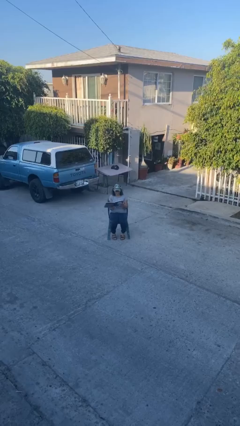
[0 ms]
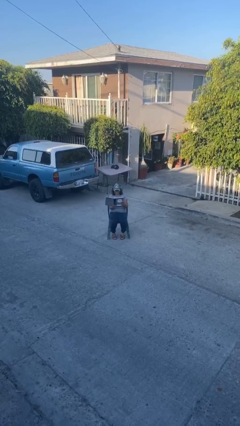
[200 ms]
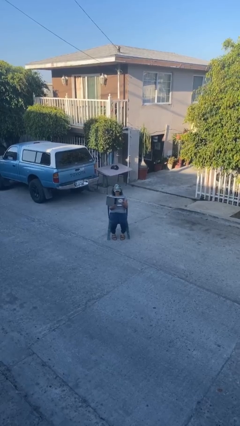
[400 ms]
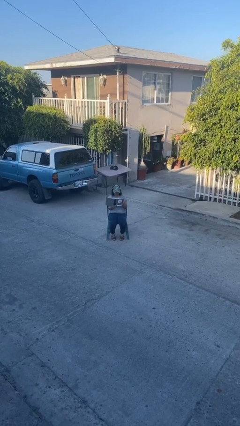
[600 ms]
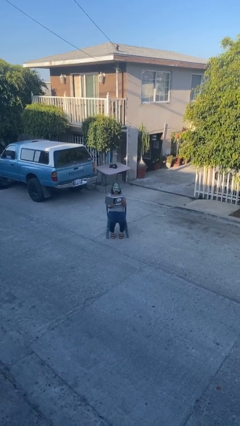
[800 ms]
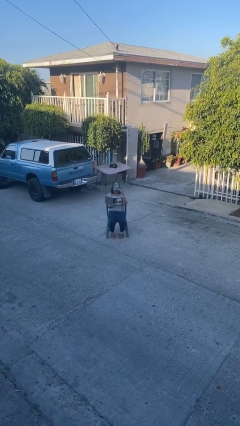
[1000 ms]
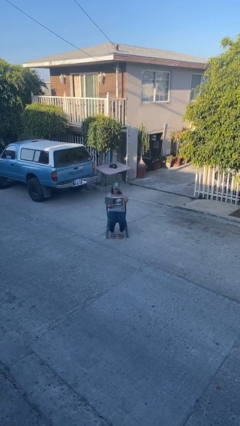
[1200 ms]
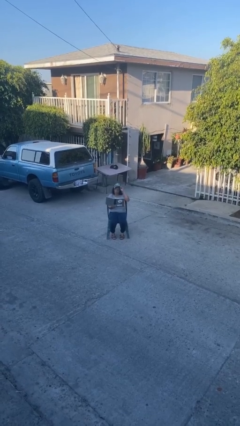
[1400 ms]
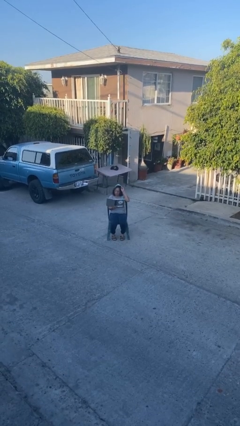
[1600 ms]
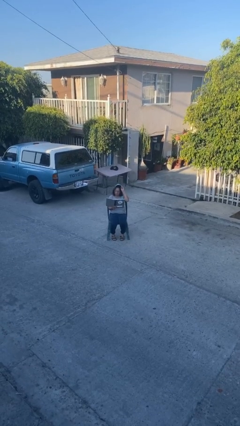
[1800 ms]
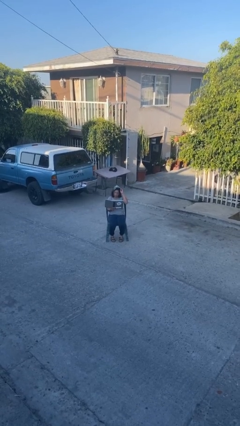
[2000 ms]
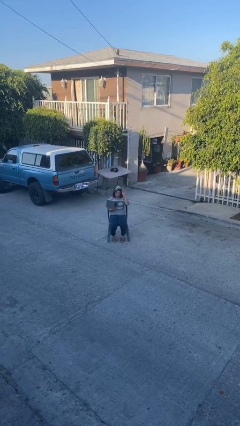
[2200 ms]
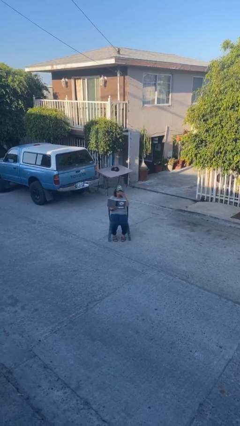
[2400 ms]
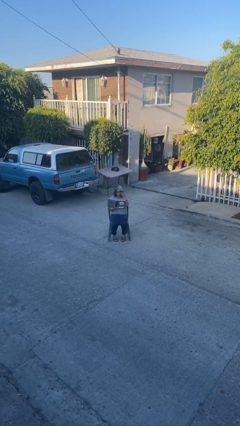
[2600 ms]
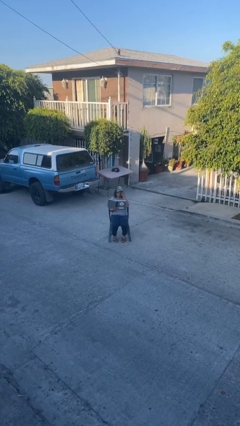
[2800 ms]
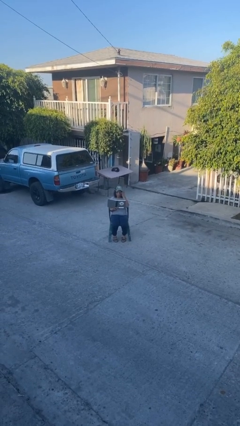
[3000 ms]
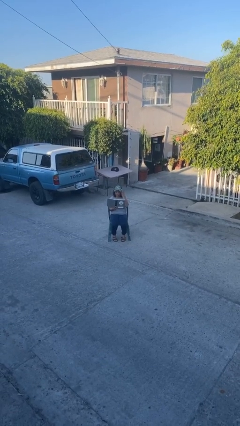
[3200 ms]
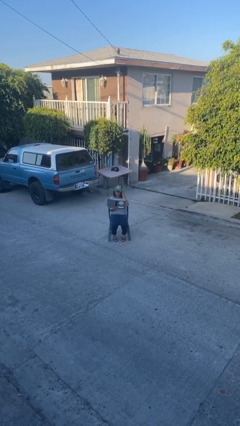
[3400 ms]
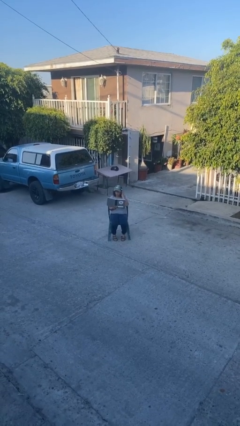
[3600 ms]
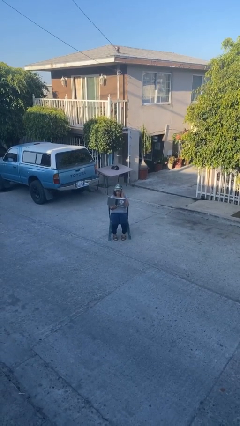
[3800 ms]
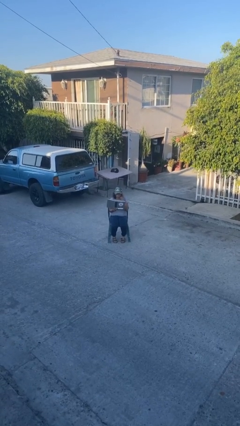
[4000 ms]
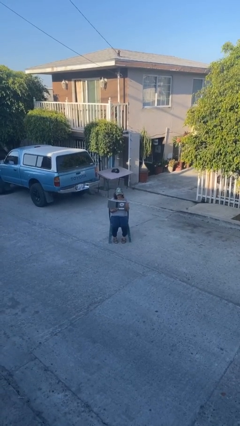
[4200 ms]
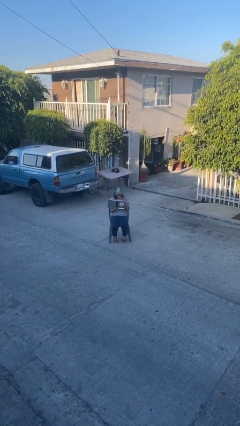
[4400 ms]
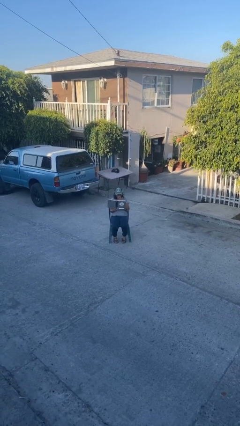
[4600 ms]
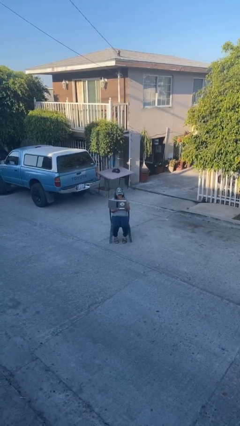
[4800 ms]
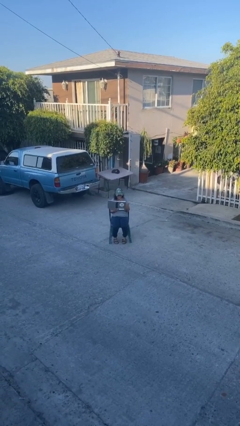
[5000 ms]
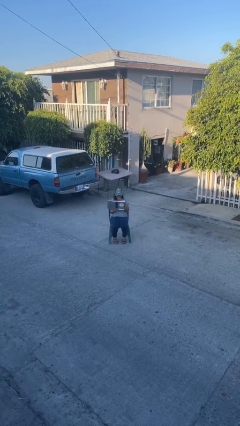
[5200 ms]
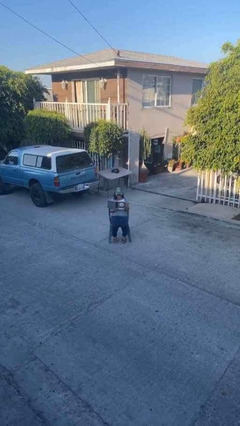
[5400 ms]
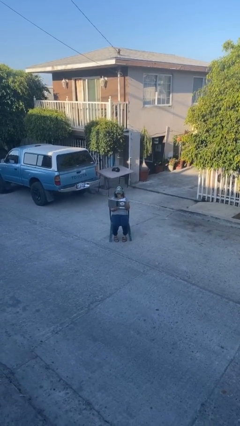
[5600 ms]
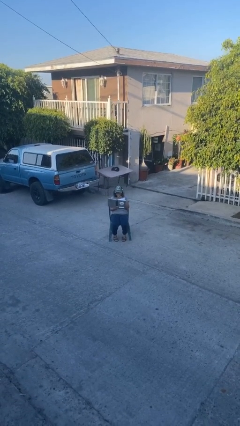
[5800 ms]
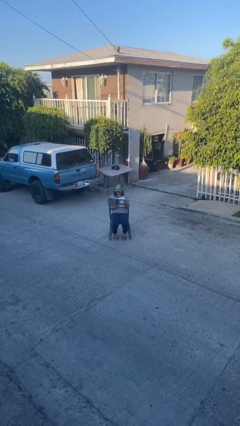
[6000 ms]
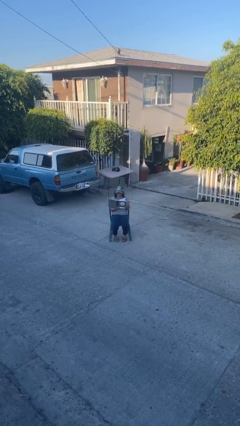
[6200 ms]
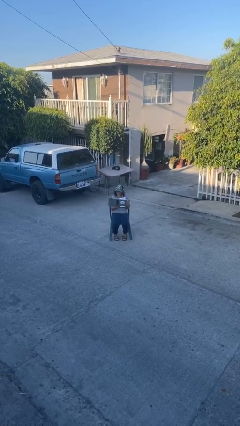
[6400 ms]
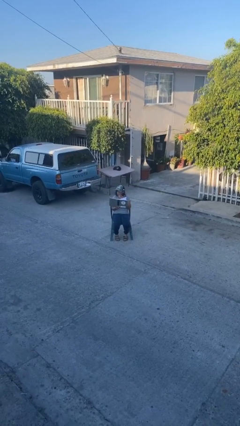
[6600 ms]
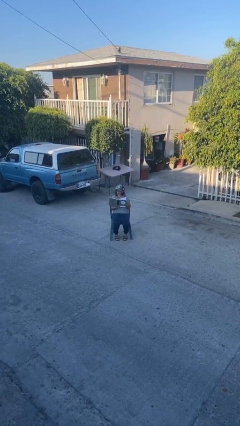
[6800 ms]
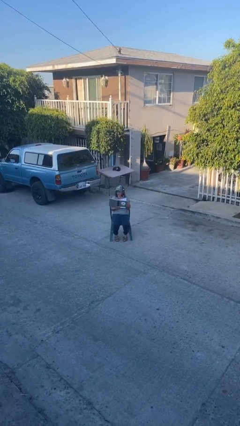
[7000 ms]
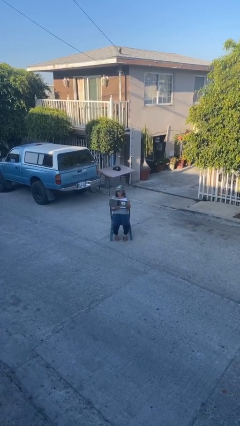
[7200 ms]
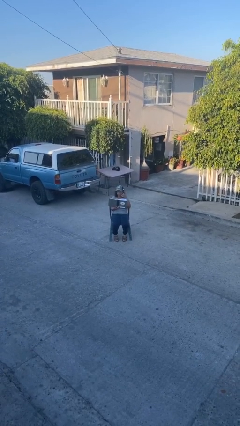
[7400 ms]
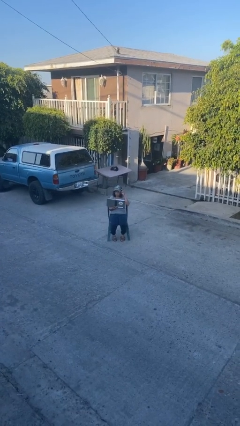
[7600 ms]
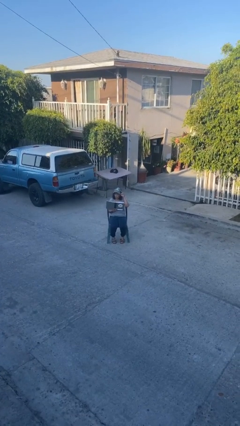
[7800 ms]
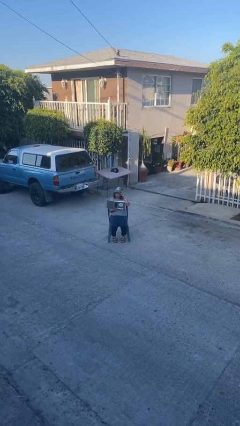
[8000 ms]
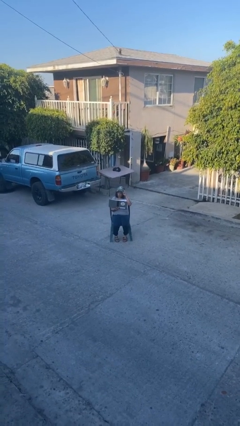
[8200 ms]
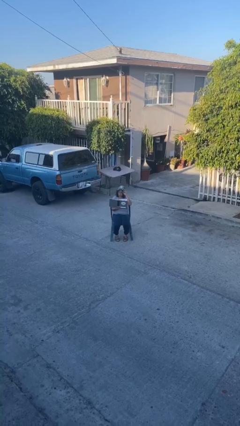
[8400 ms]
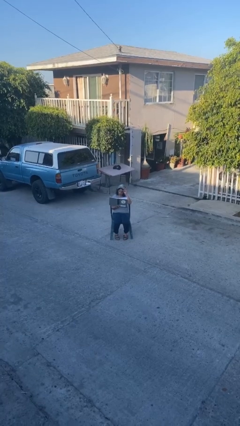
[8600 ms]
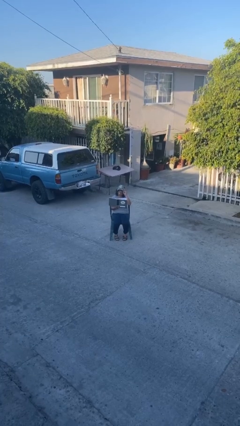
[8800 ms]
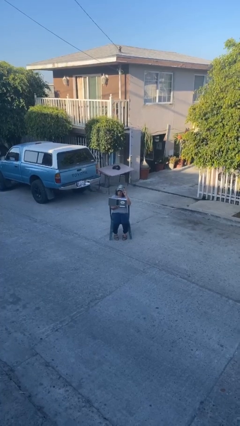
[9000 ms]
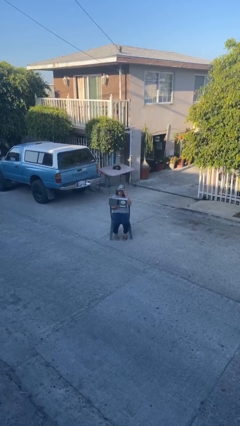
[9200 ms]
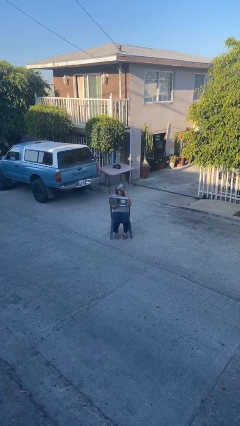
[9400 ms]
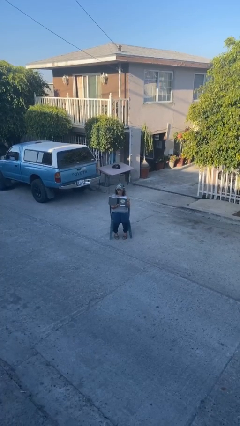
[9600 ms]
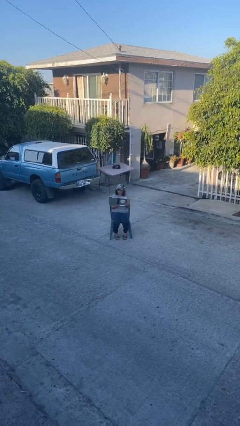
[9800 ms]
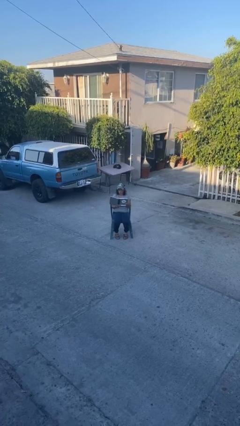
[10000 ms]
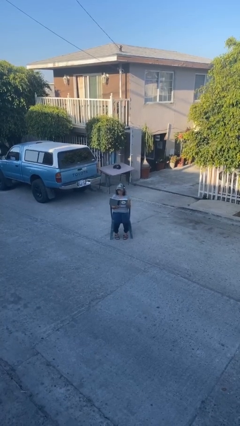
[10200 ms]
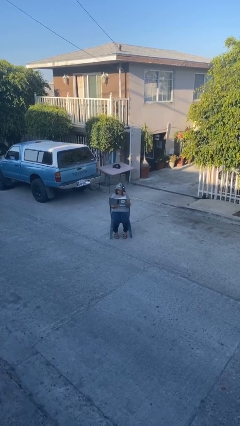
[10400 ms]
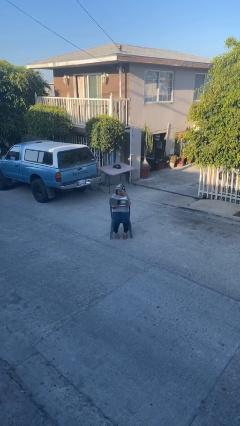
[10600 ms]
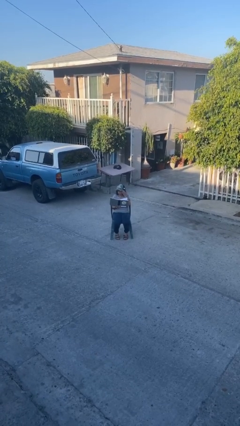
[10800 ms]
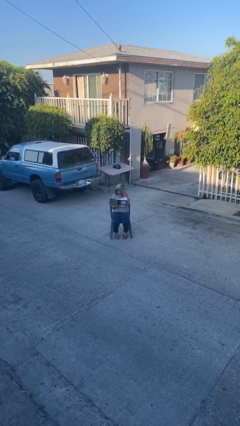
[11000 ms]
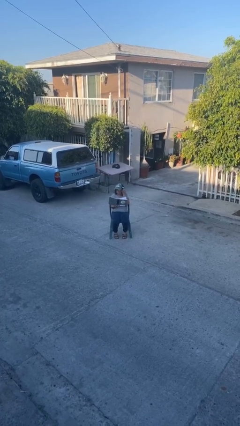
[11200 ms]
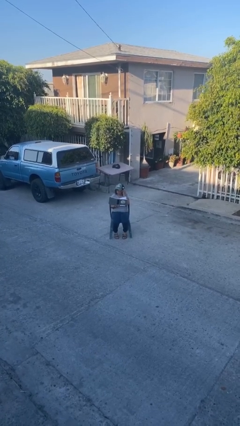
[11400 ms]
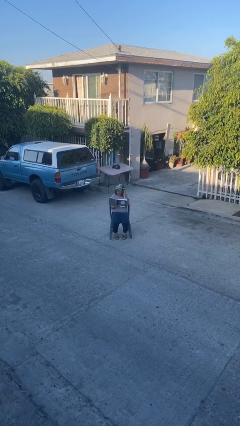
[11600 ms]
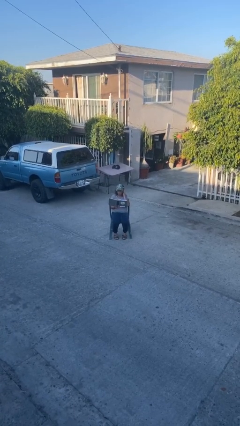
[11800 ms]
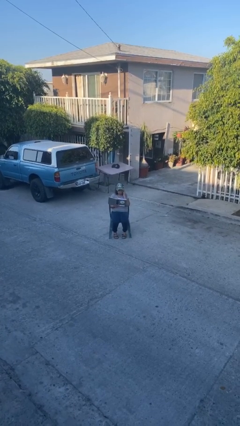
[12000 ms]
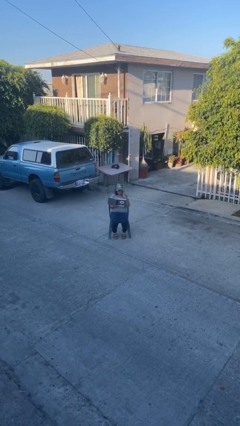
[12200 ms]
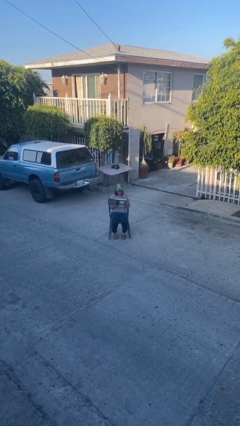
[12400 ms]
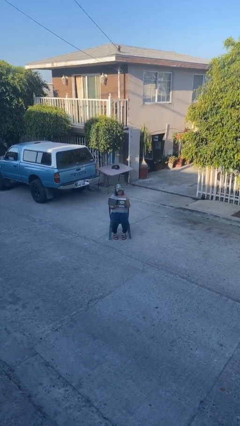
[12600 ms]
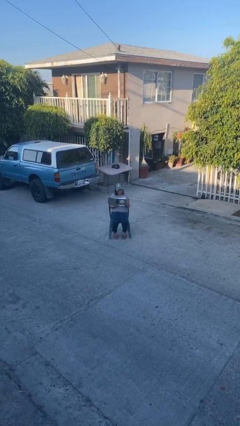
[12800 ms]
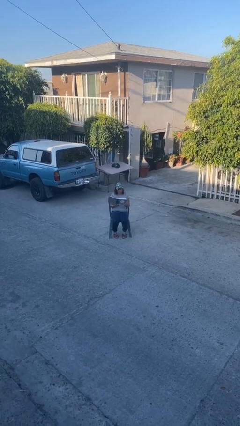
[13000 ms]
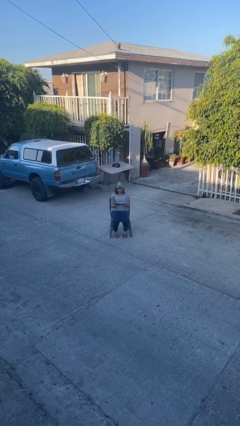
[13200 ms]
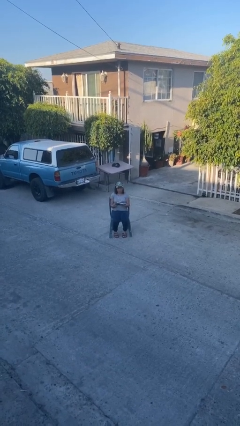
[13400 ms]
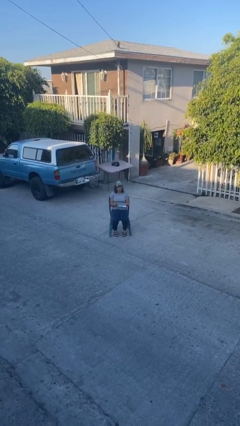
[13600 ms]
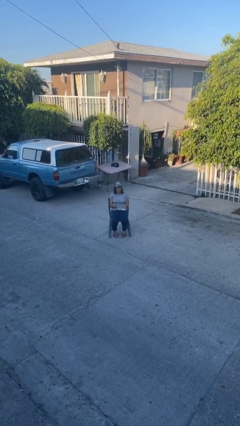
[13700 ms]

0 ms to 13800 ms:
person reads document

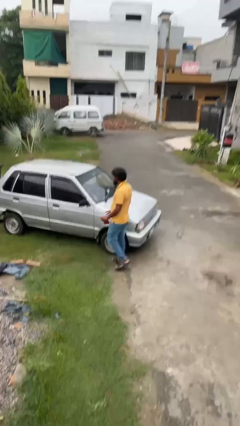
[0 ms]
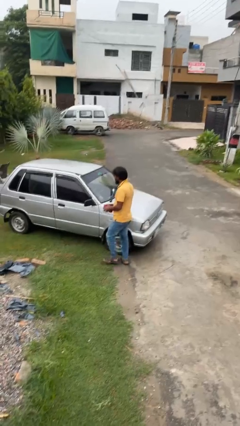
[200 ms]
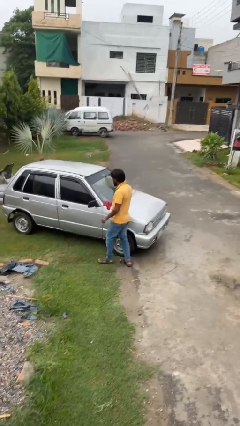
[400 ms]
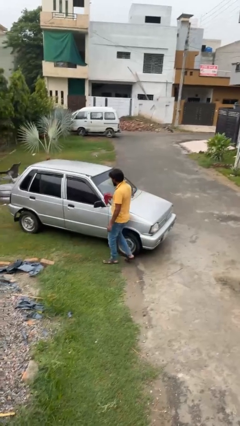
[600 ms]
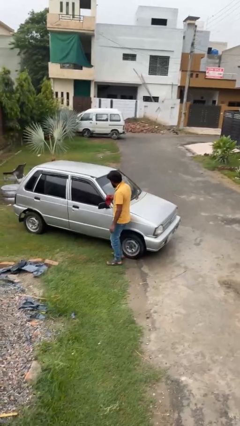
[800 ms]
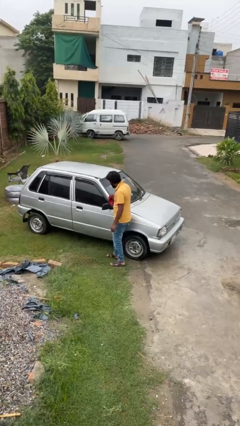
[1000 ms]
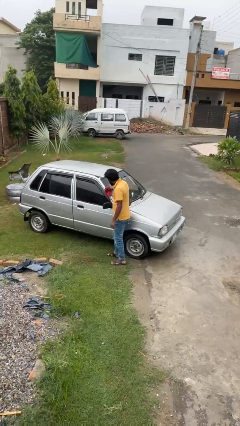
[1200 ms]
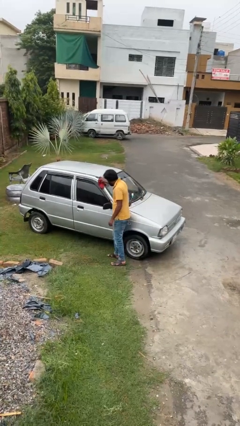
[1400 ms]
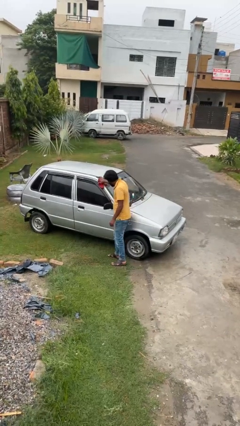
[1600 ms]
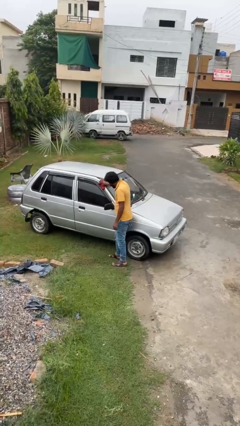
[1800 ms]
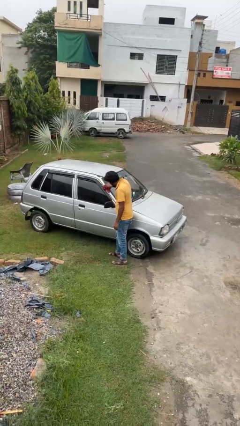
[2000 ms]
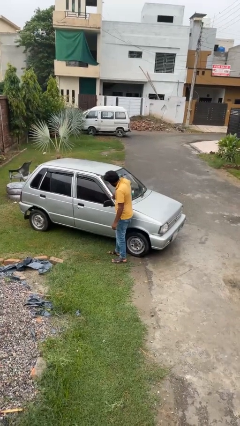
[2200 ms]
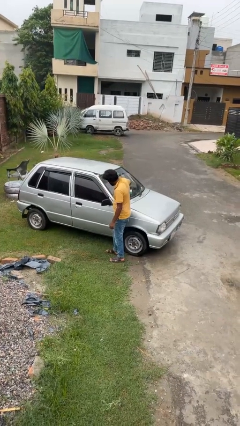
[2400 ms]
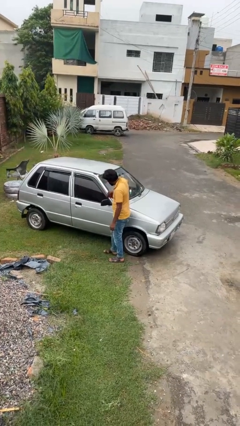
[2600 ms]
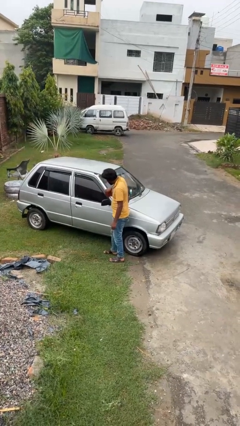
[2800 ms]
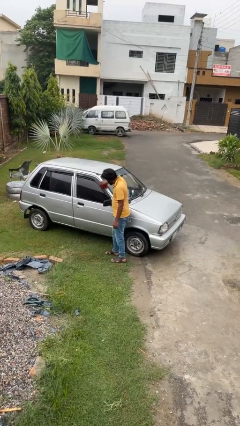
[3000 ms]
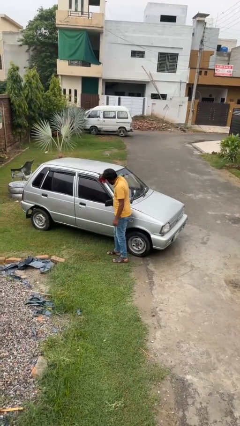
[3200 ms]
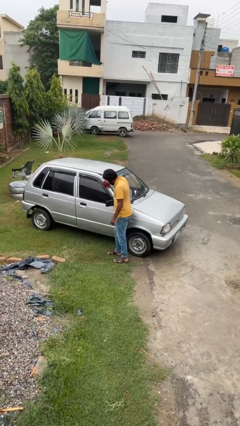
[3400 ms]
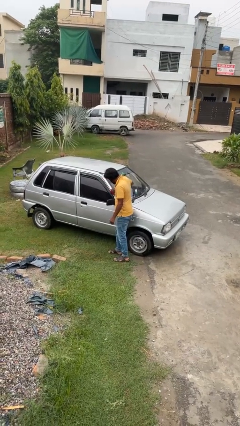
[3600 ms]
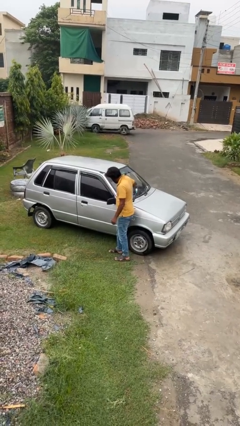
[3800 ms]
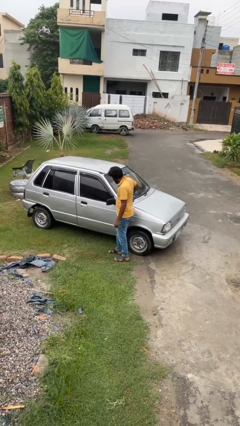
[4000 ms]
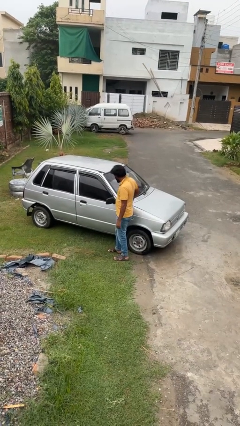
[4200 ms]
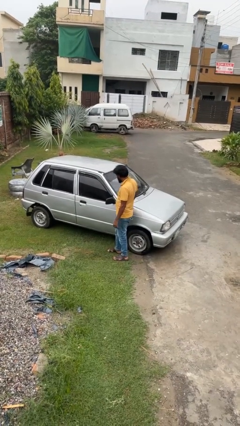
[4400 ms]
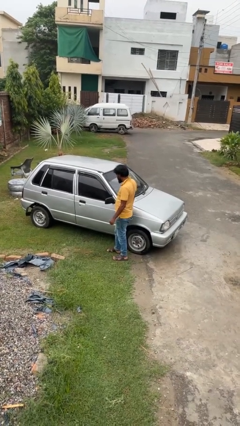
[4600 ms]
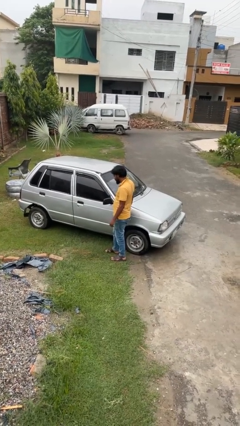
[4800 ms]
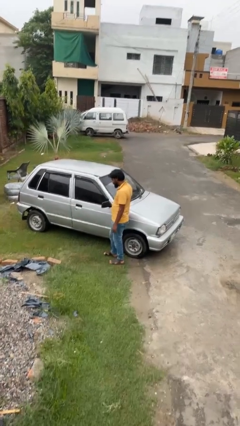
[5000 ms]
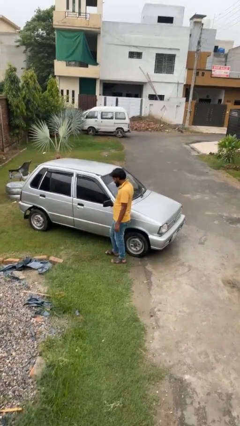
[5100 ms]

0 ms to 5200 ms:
person polishes car with rag
